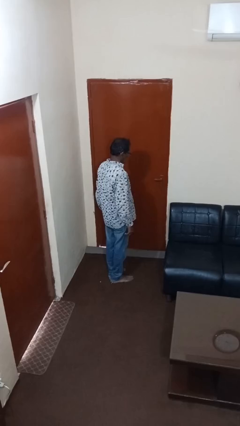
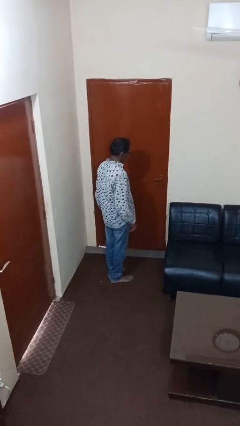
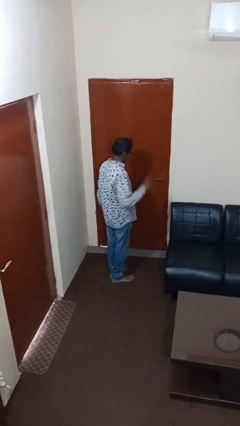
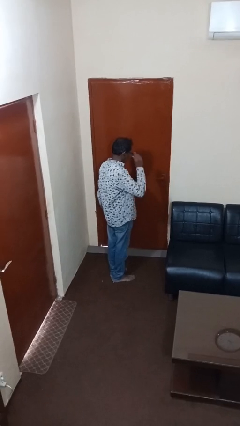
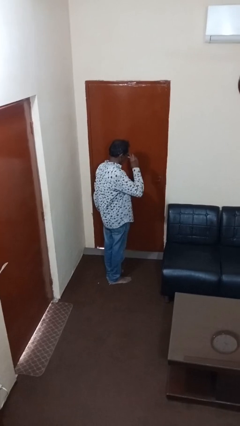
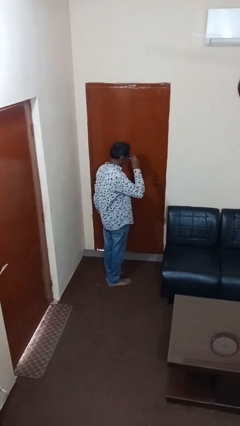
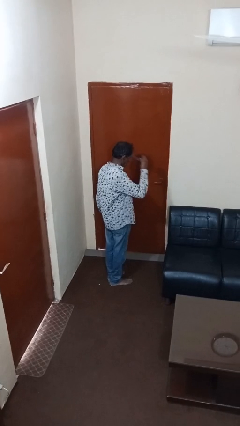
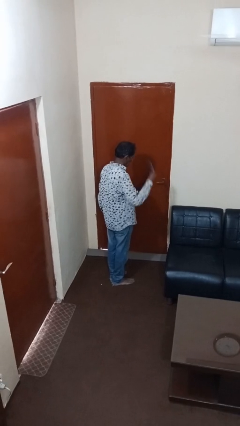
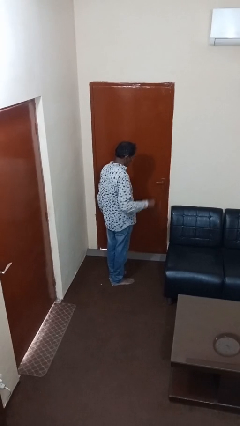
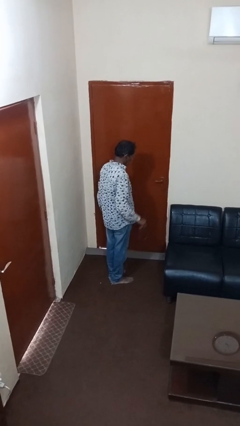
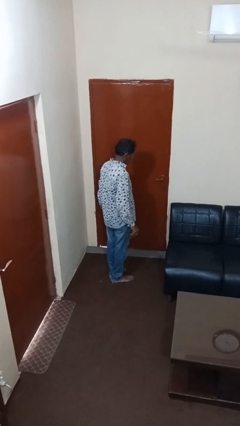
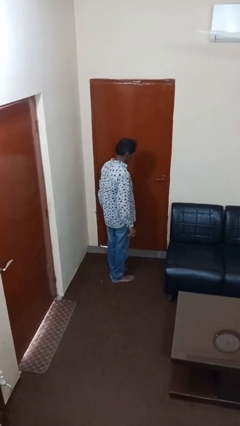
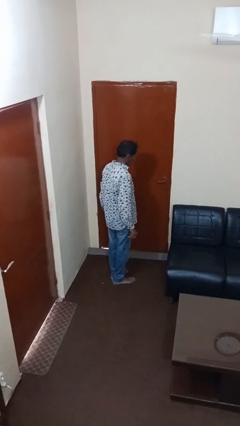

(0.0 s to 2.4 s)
person takes off glasses

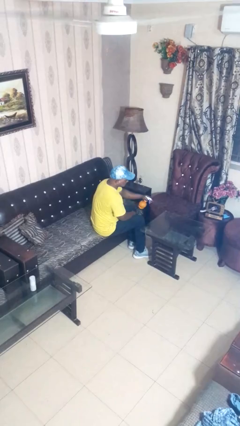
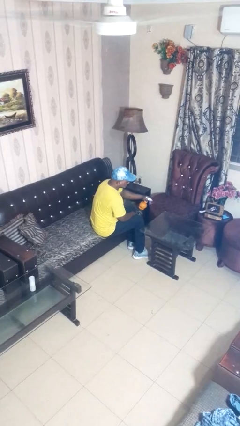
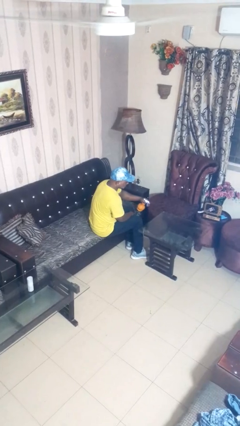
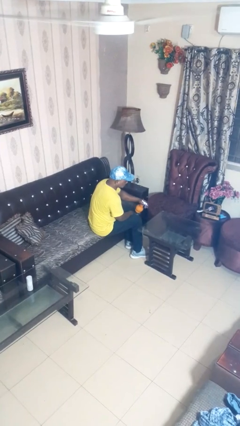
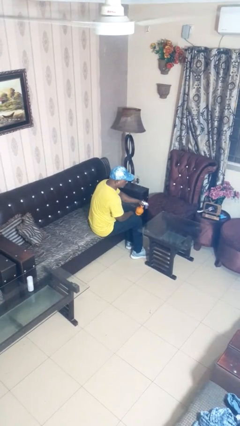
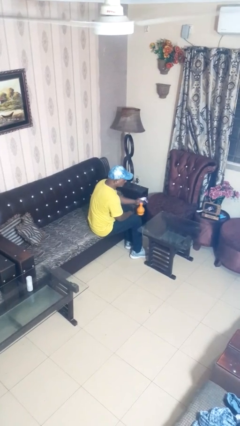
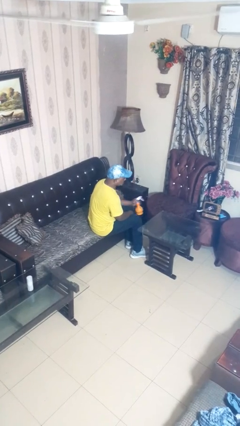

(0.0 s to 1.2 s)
person sprays from bottle

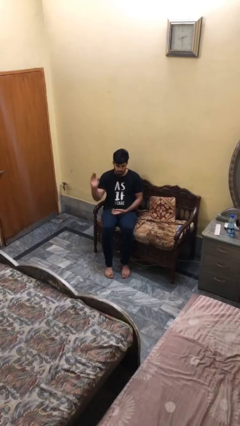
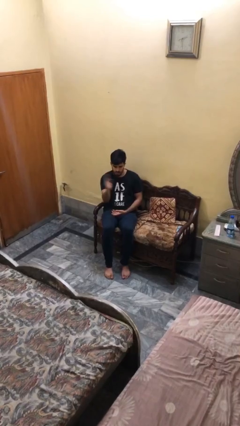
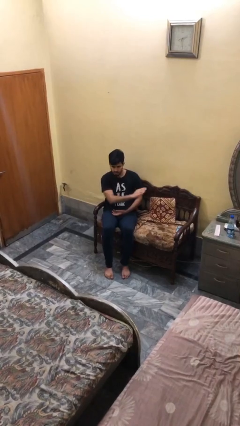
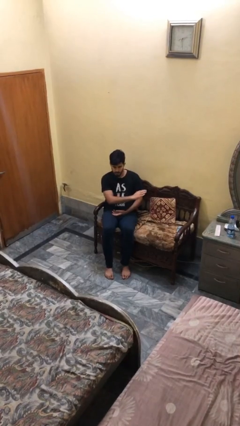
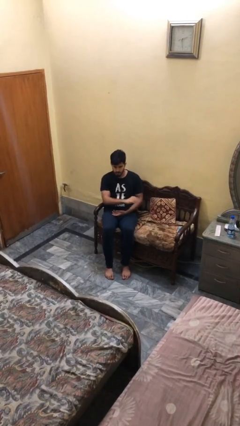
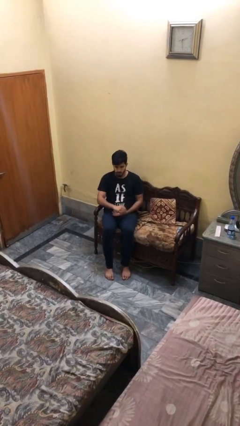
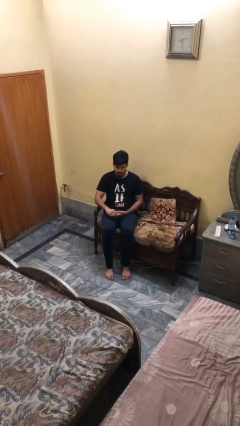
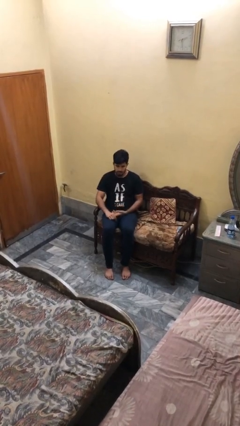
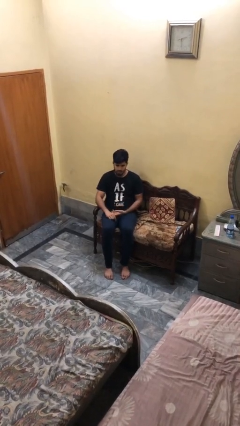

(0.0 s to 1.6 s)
person gestures swipe left

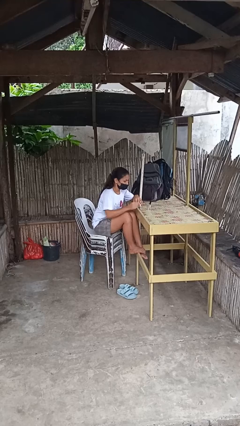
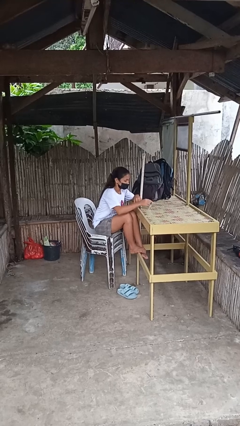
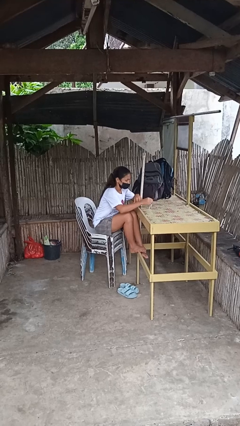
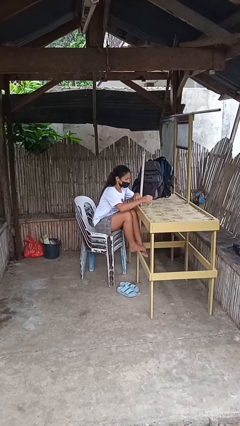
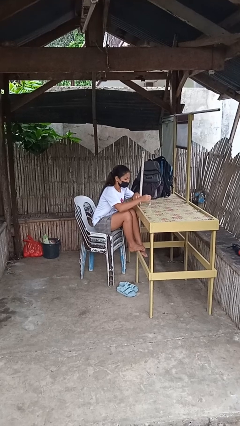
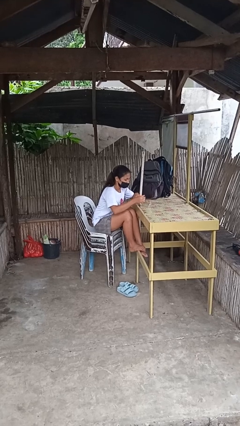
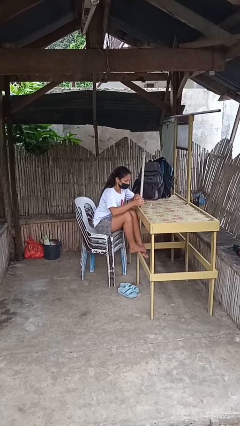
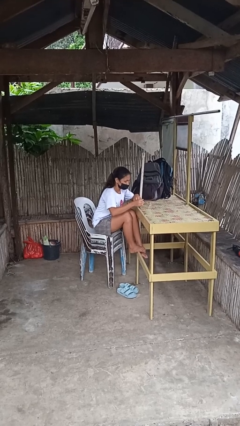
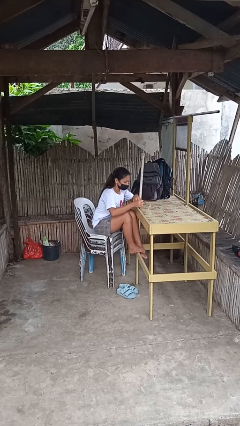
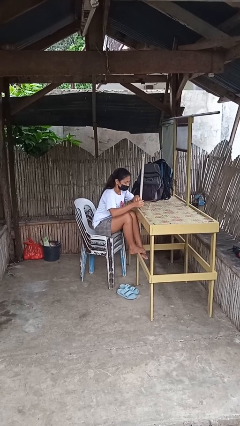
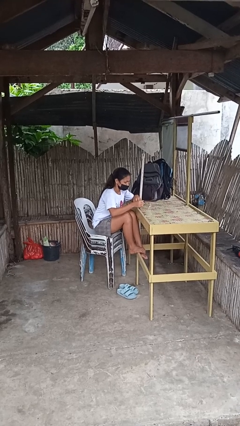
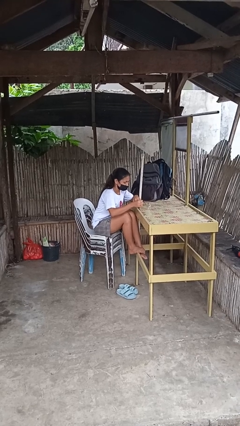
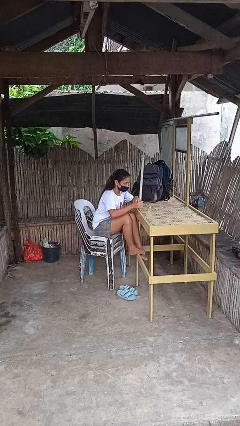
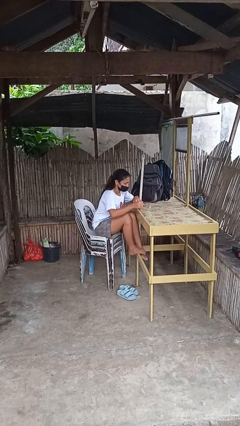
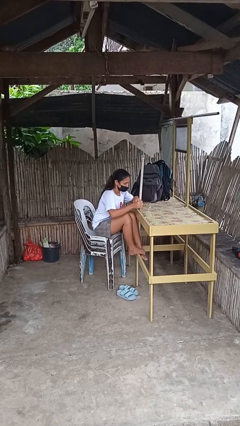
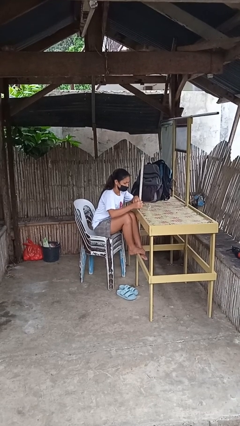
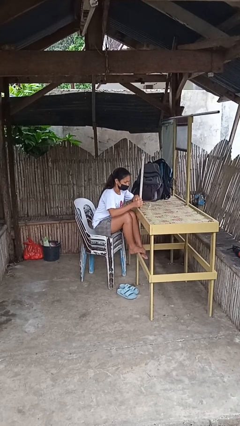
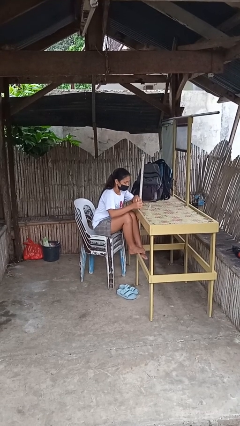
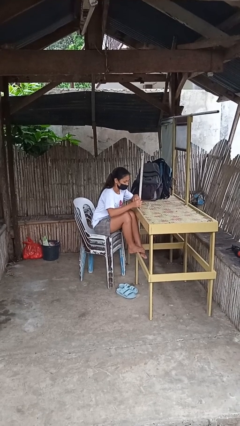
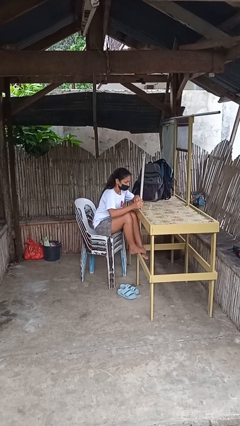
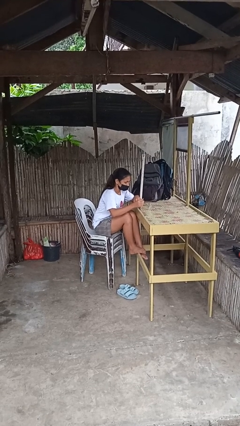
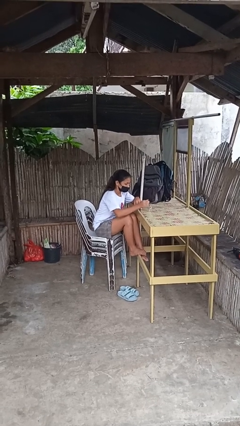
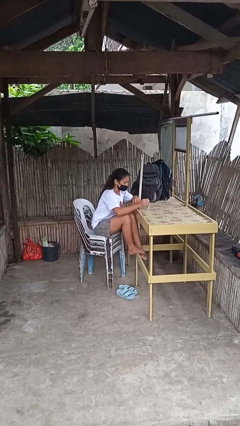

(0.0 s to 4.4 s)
person paints fingernails

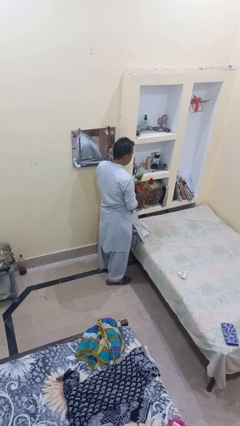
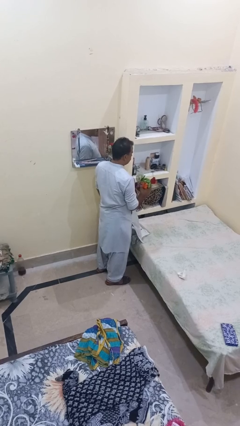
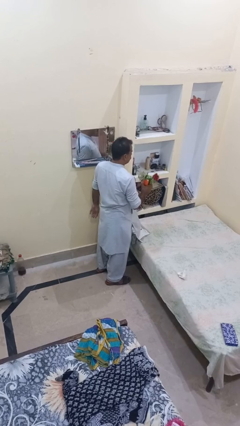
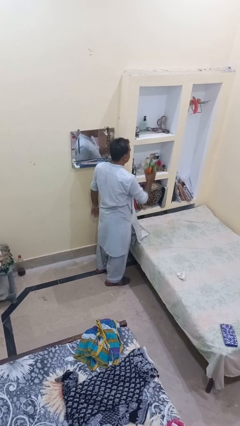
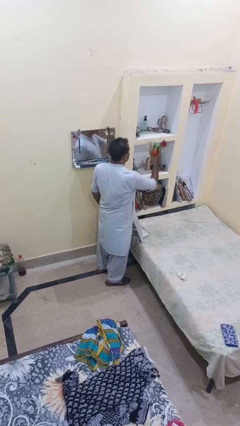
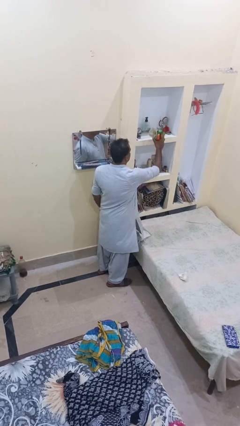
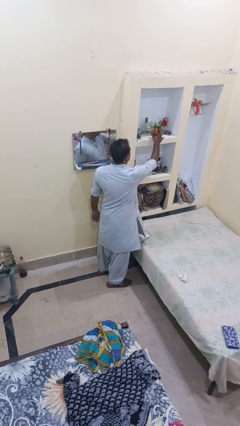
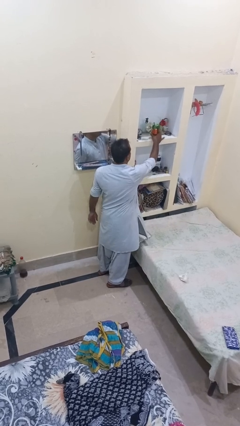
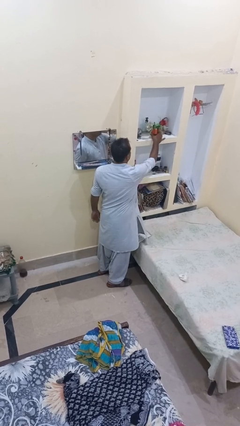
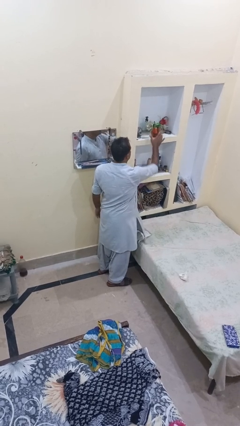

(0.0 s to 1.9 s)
person puts down object on shelf

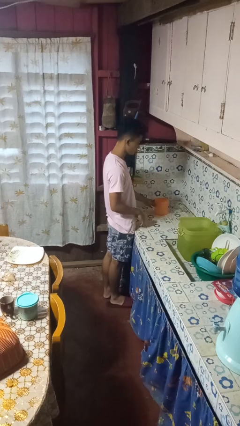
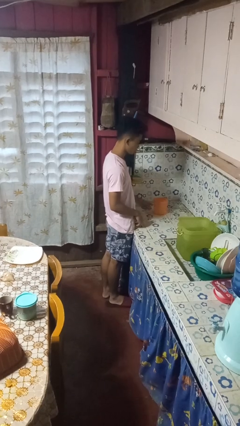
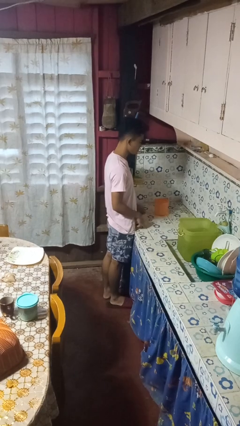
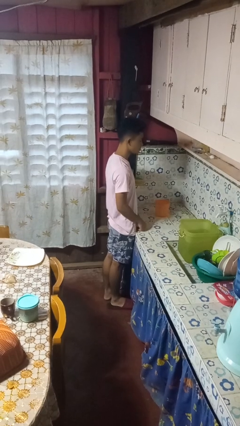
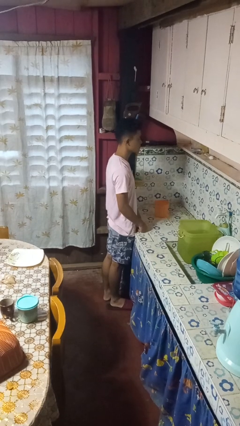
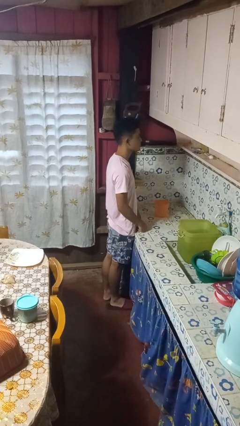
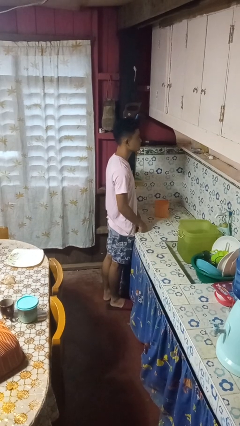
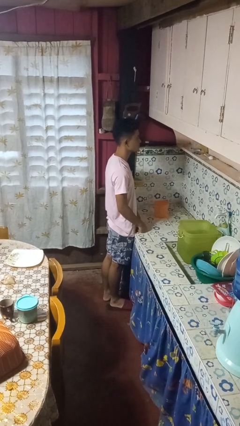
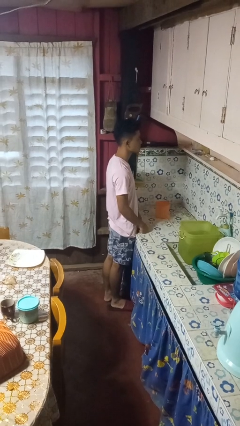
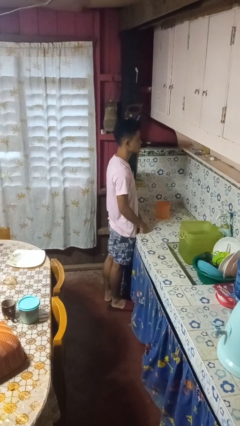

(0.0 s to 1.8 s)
person puts down object on countertop

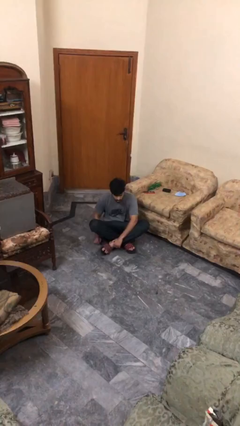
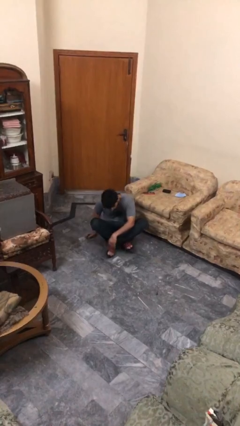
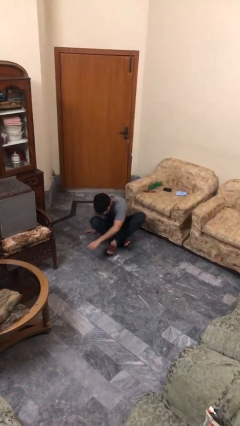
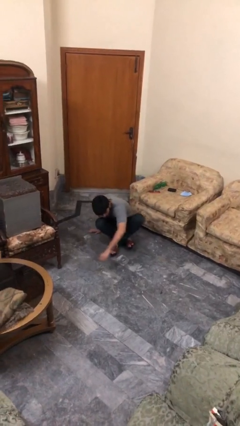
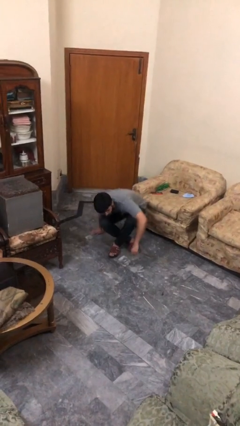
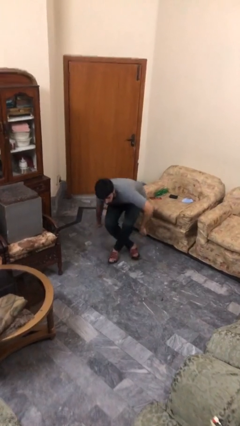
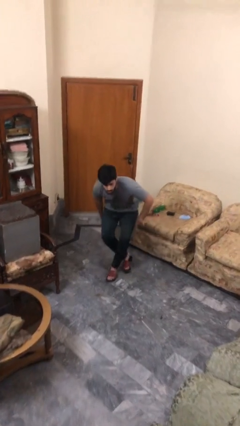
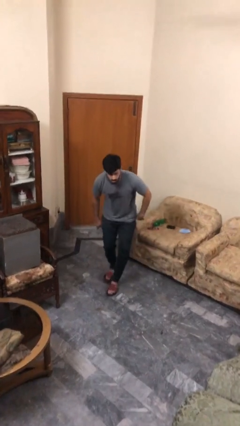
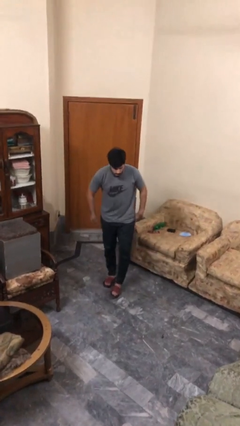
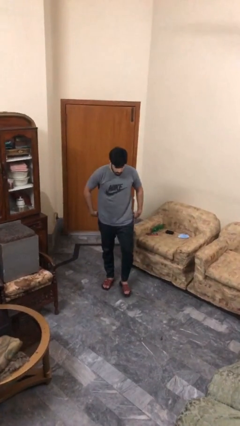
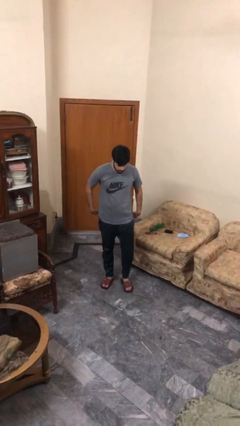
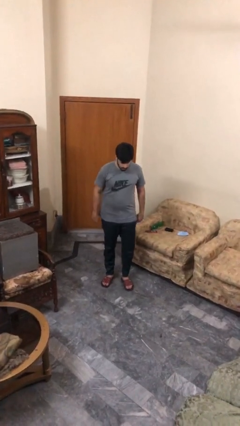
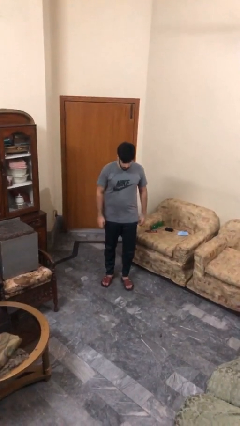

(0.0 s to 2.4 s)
person stands up from floor

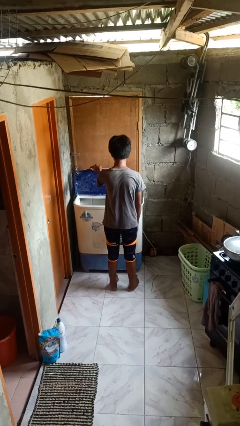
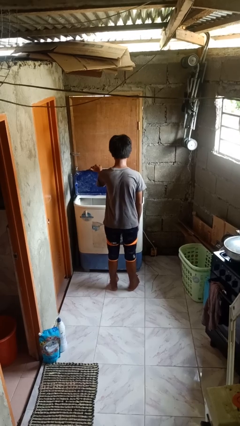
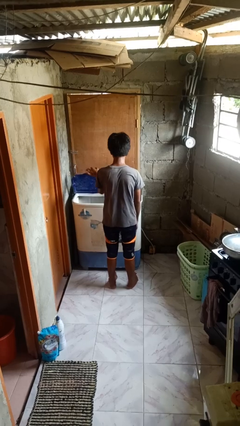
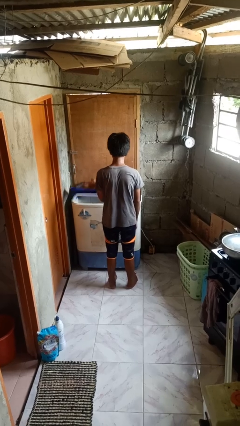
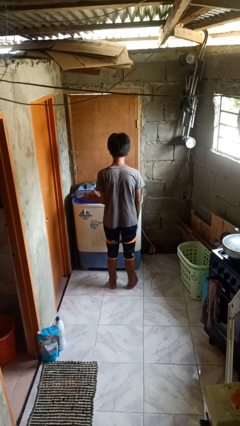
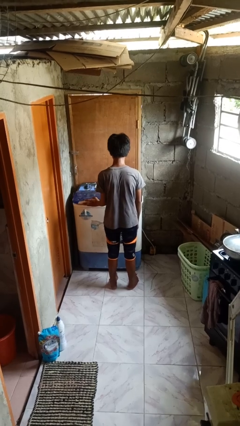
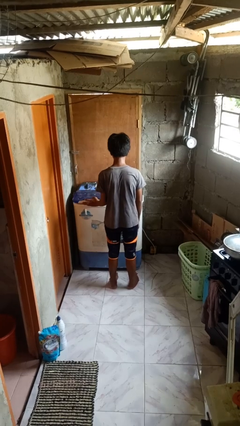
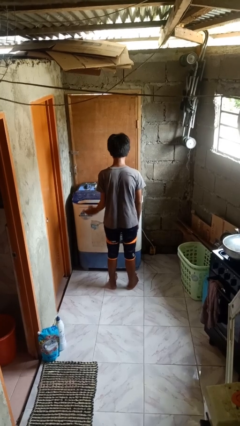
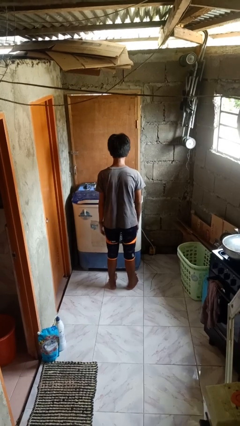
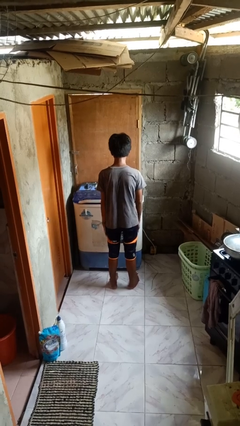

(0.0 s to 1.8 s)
person closes clothes washer
